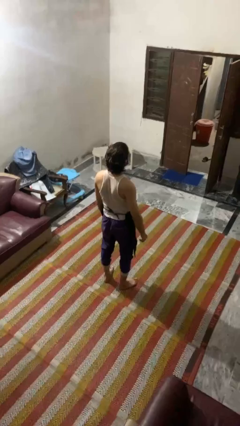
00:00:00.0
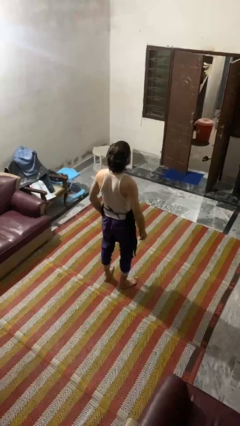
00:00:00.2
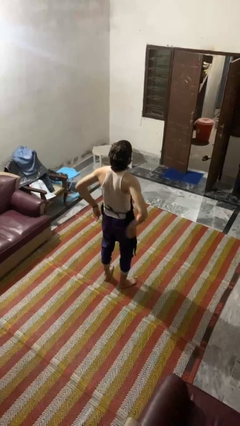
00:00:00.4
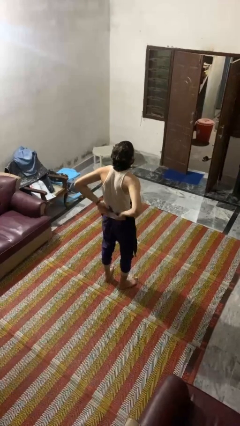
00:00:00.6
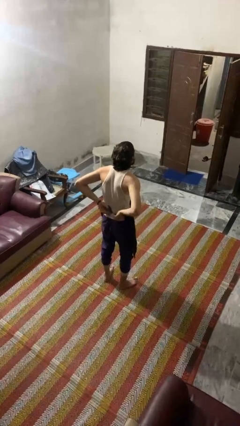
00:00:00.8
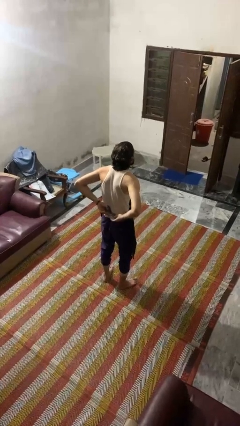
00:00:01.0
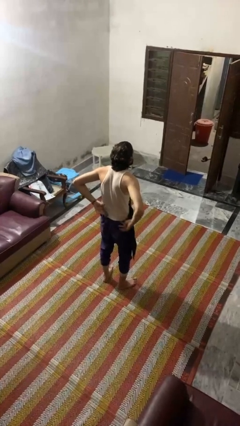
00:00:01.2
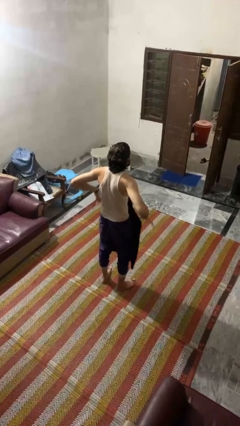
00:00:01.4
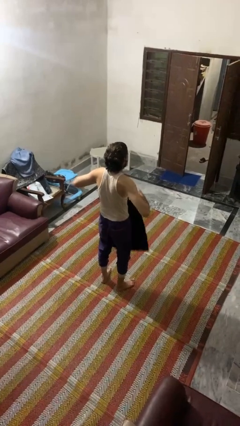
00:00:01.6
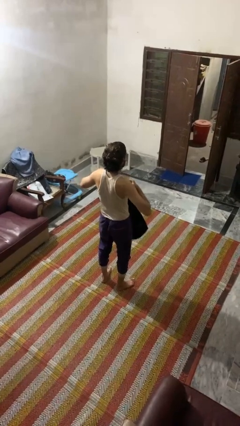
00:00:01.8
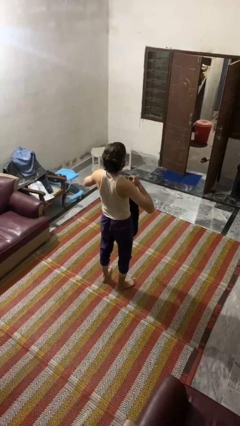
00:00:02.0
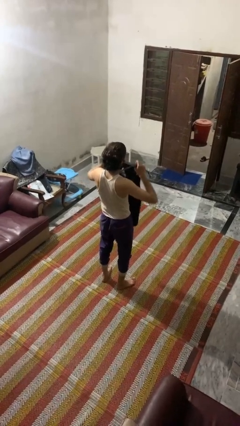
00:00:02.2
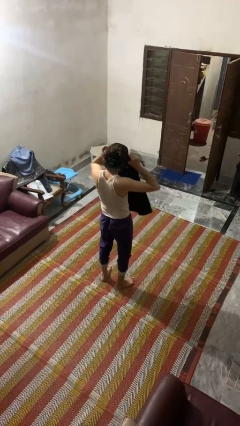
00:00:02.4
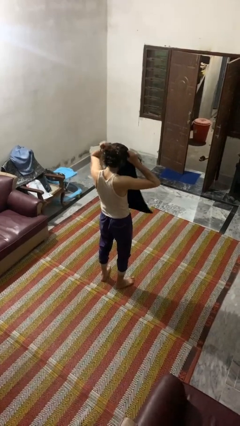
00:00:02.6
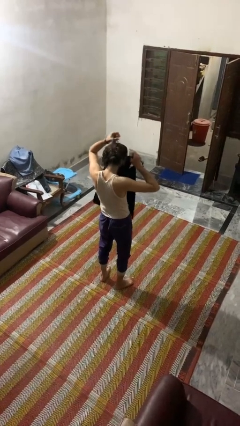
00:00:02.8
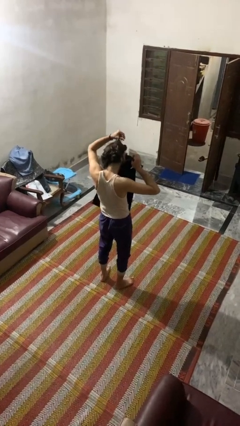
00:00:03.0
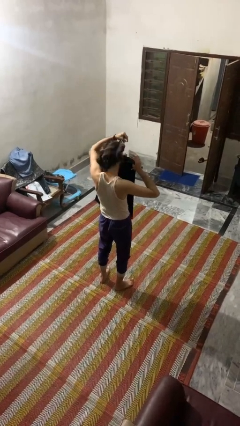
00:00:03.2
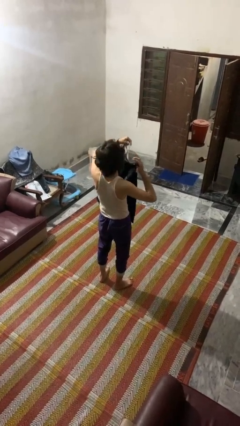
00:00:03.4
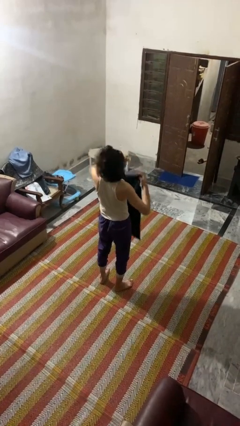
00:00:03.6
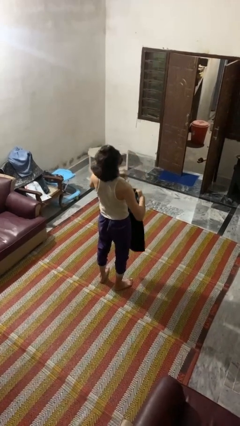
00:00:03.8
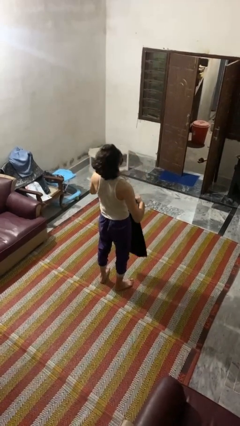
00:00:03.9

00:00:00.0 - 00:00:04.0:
person takes off apron

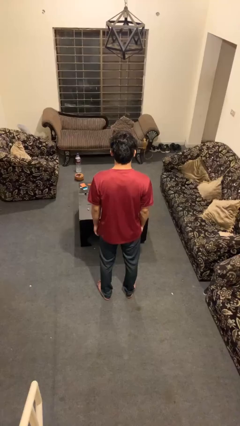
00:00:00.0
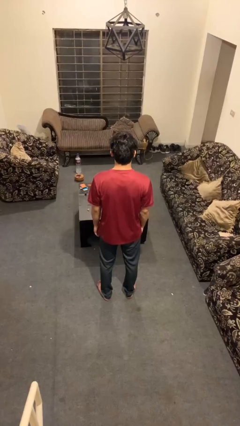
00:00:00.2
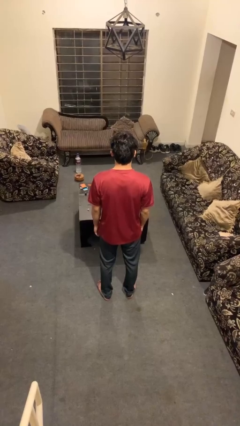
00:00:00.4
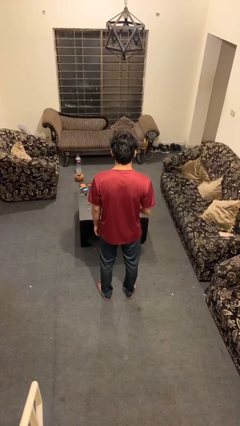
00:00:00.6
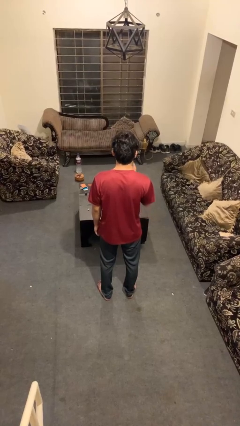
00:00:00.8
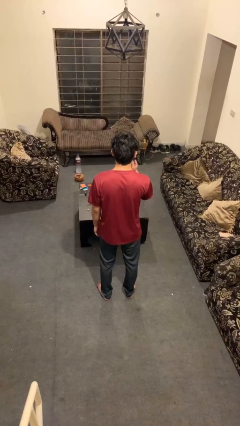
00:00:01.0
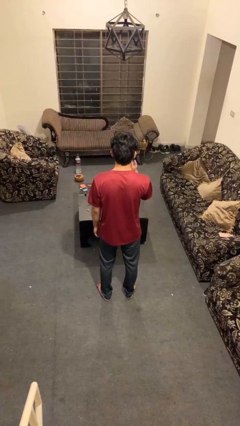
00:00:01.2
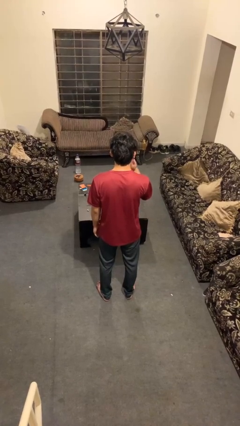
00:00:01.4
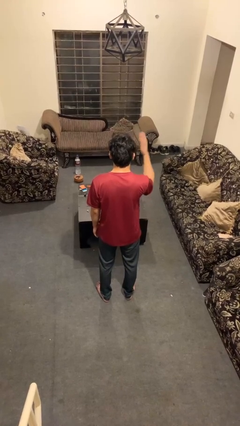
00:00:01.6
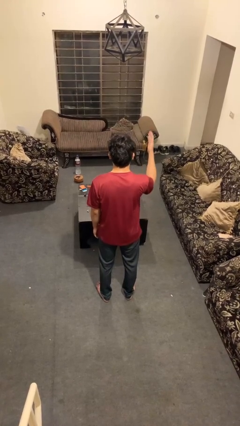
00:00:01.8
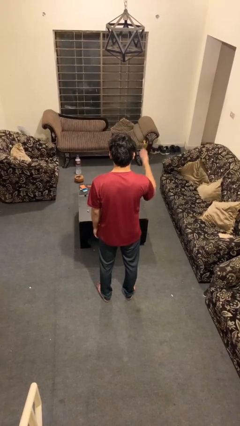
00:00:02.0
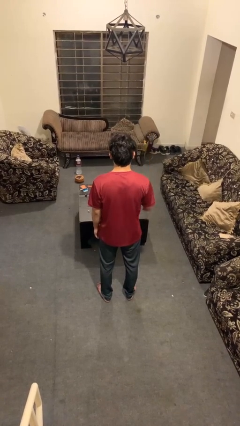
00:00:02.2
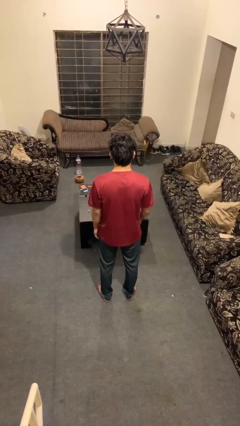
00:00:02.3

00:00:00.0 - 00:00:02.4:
person gestures blow kiss

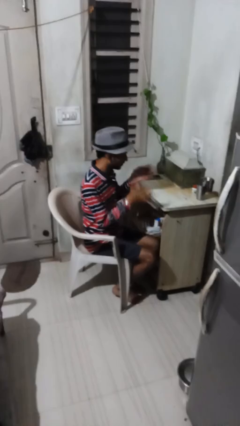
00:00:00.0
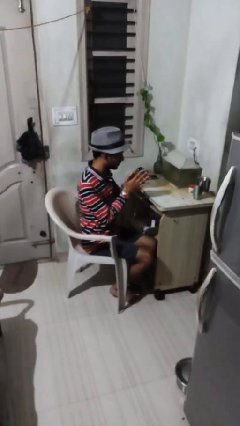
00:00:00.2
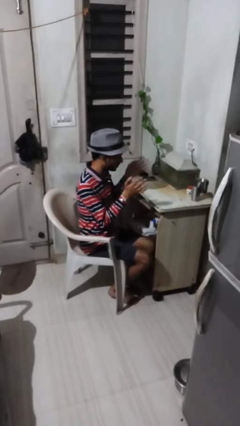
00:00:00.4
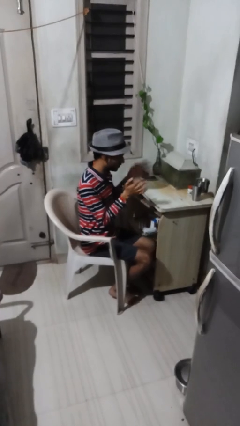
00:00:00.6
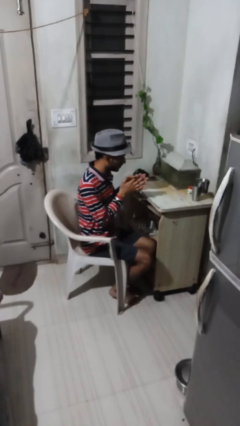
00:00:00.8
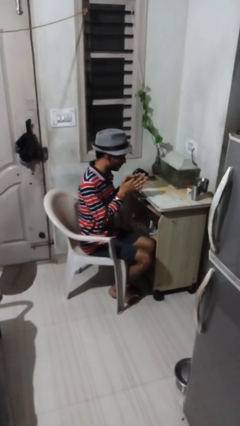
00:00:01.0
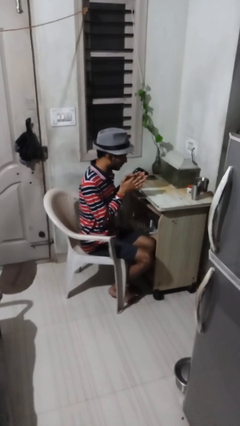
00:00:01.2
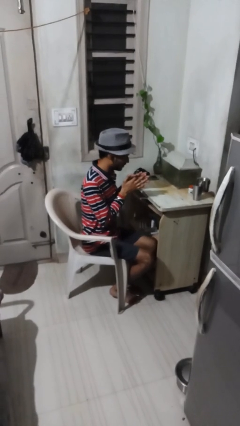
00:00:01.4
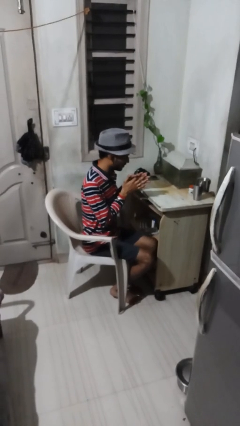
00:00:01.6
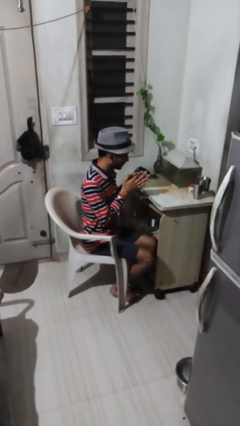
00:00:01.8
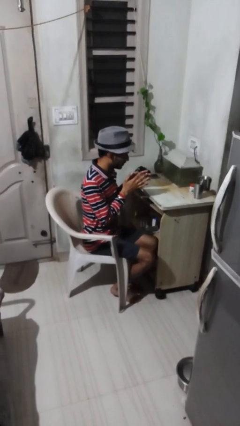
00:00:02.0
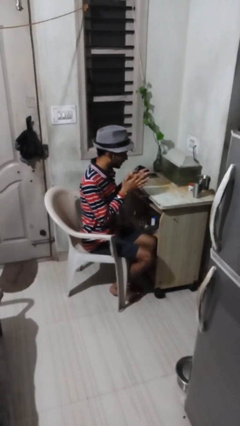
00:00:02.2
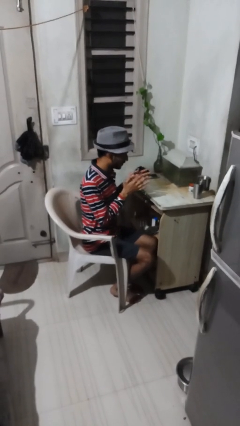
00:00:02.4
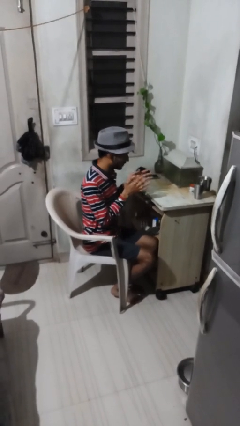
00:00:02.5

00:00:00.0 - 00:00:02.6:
person claps hands

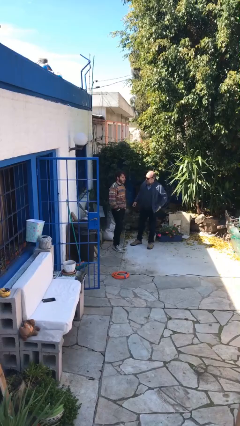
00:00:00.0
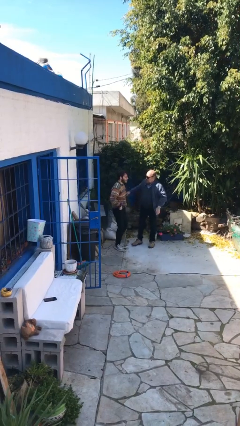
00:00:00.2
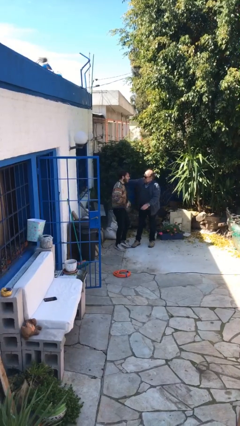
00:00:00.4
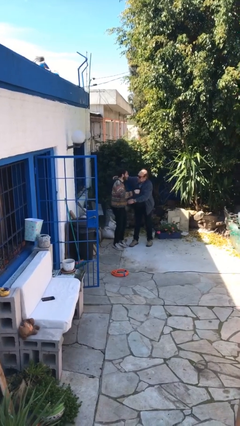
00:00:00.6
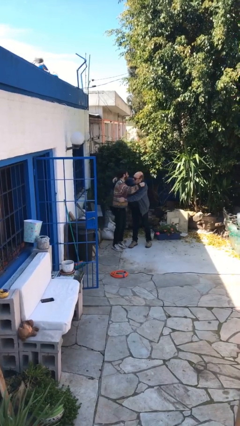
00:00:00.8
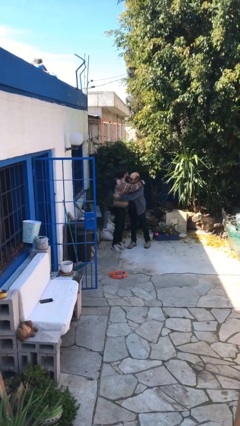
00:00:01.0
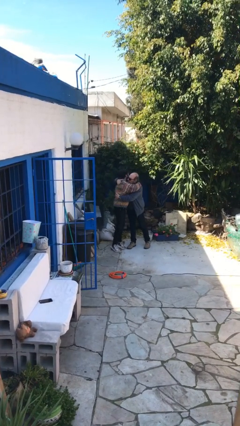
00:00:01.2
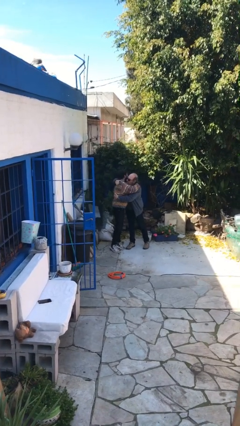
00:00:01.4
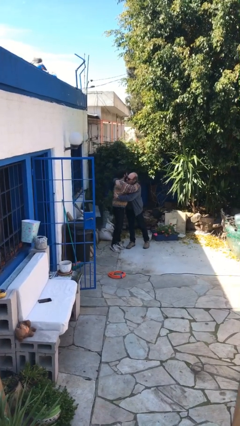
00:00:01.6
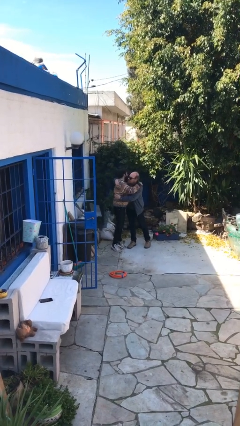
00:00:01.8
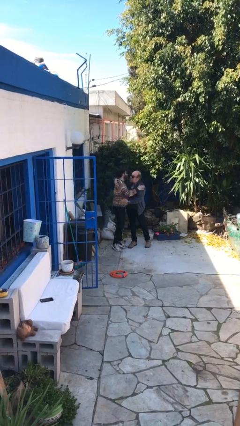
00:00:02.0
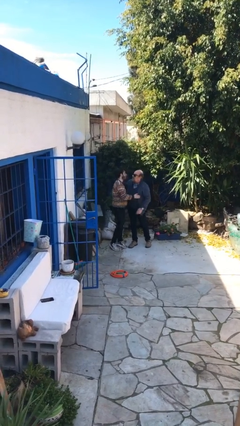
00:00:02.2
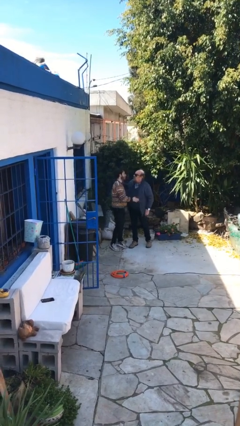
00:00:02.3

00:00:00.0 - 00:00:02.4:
person embraces person

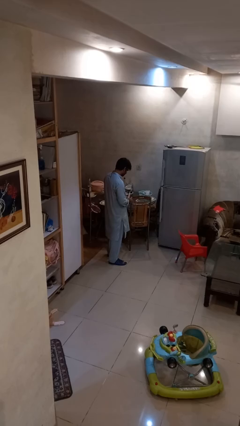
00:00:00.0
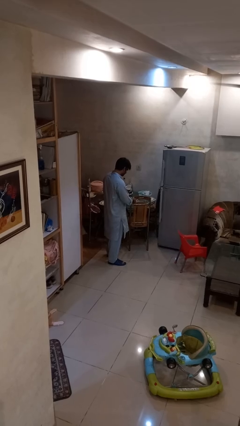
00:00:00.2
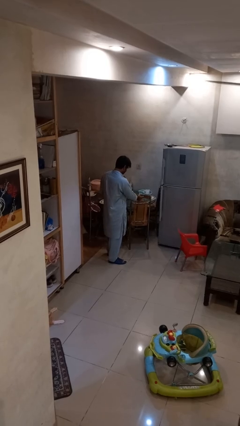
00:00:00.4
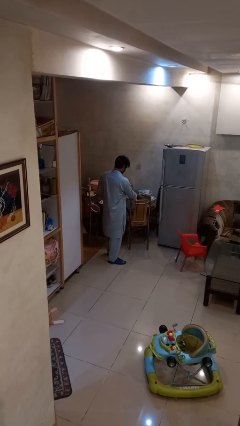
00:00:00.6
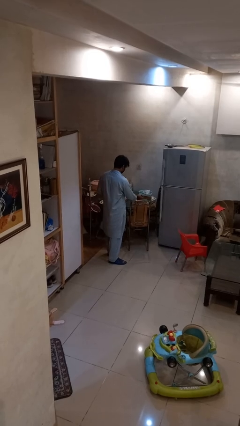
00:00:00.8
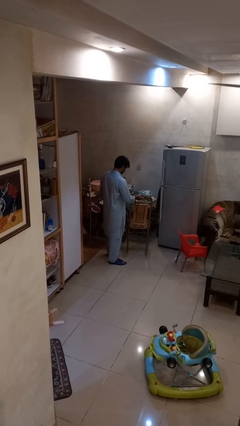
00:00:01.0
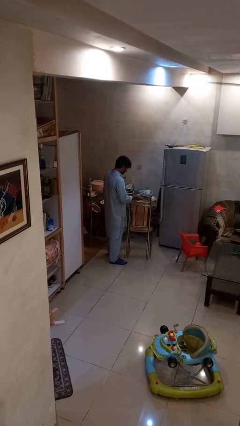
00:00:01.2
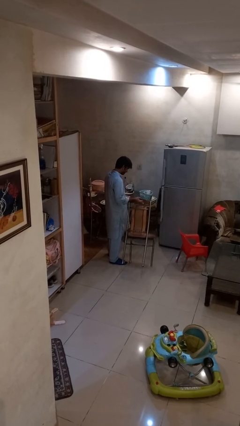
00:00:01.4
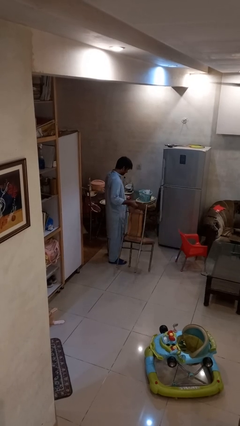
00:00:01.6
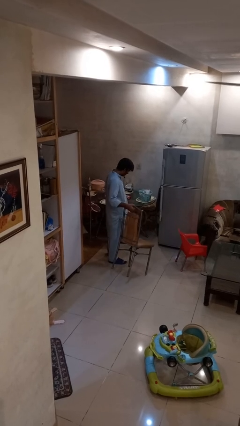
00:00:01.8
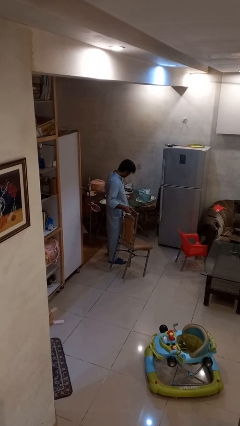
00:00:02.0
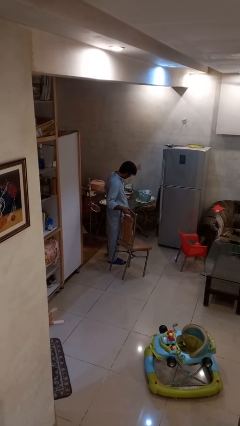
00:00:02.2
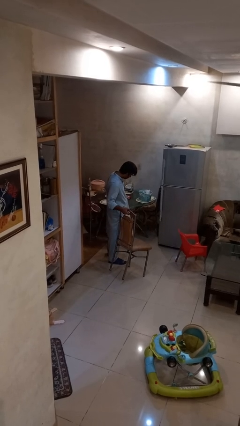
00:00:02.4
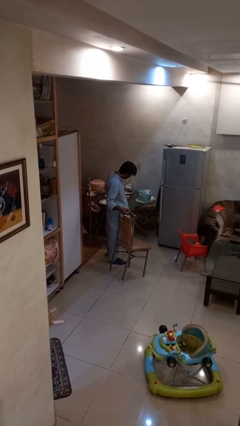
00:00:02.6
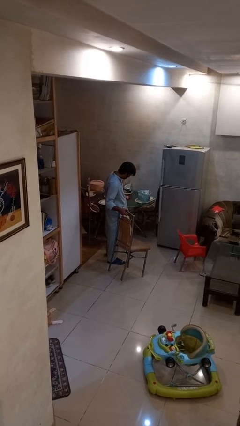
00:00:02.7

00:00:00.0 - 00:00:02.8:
person pulls out chair

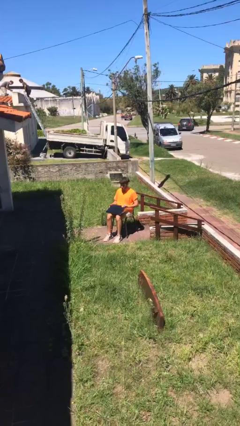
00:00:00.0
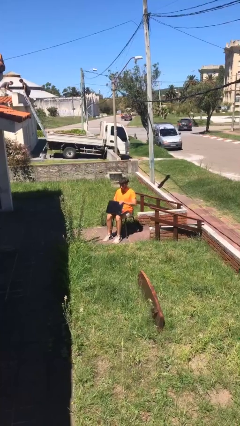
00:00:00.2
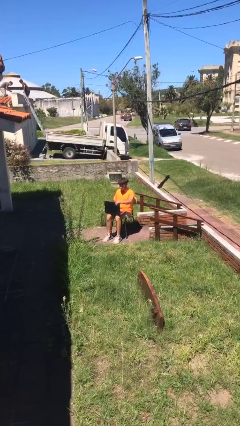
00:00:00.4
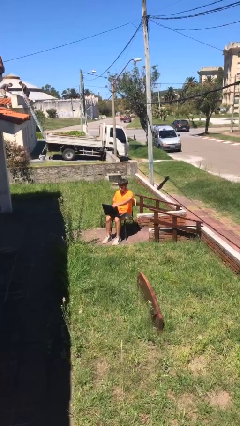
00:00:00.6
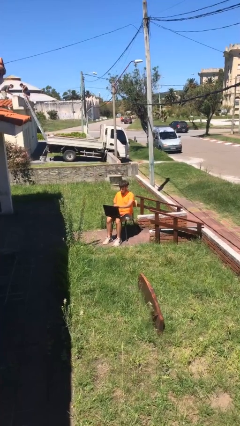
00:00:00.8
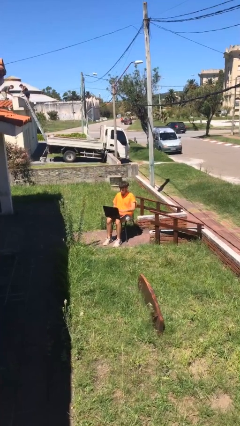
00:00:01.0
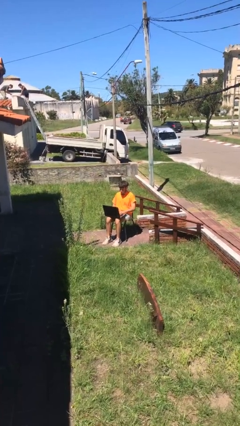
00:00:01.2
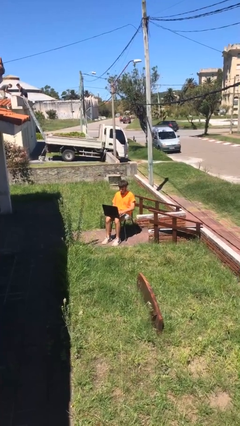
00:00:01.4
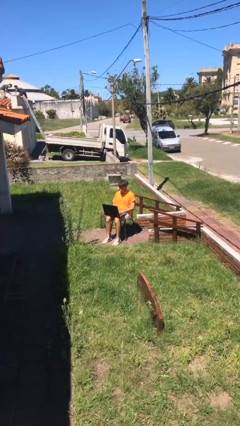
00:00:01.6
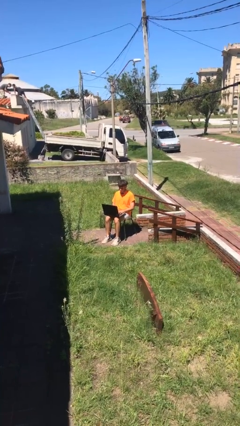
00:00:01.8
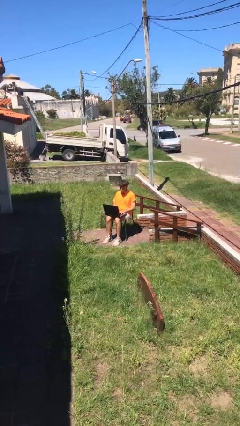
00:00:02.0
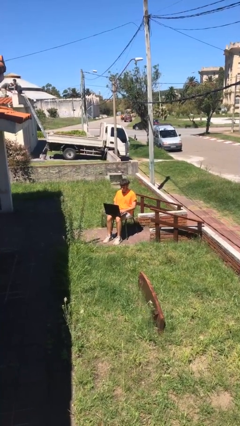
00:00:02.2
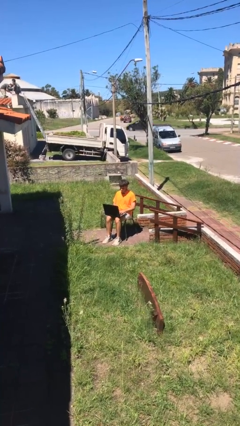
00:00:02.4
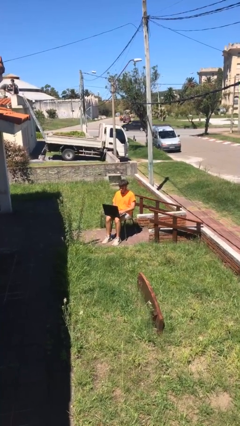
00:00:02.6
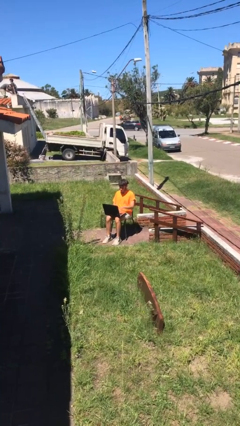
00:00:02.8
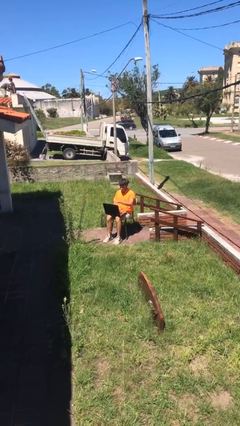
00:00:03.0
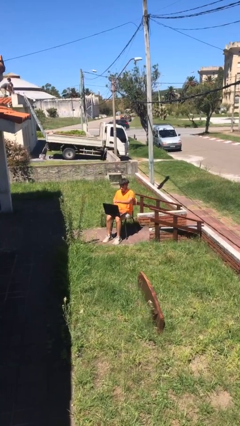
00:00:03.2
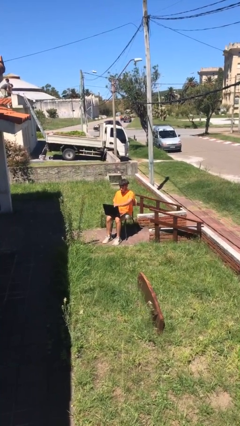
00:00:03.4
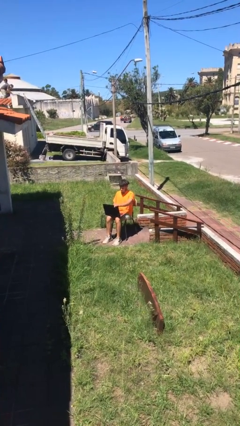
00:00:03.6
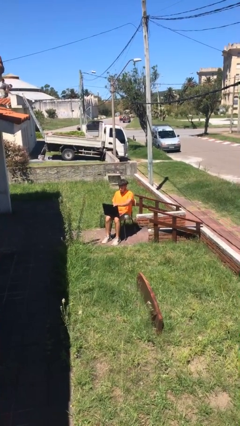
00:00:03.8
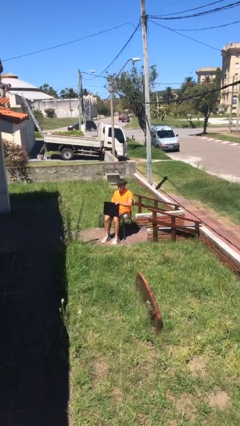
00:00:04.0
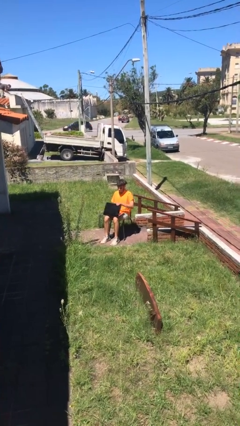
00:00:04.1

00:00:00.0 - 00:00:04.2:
person interacts with laptop
